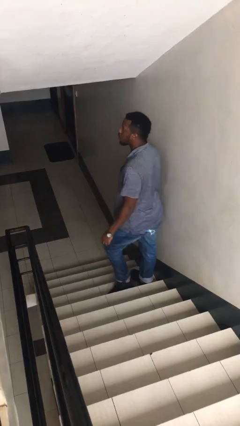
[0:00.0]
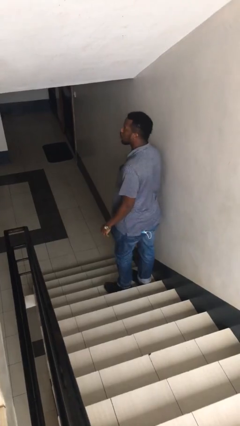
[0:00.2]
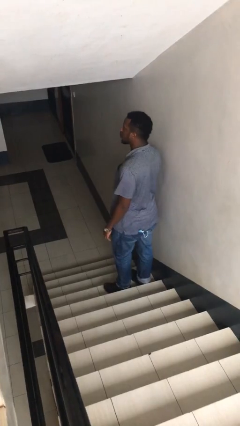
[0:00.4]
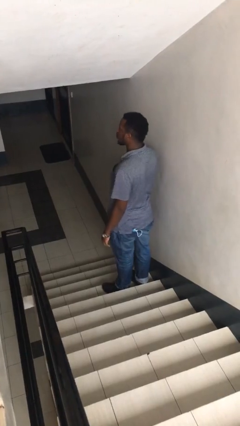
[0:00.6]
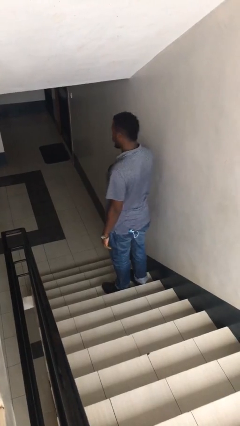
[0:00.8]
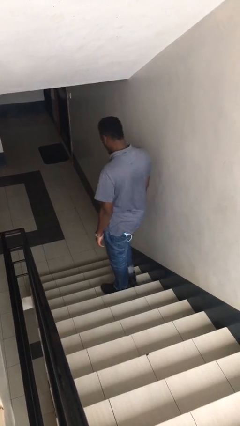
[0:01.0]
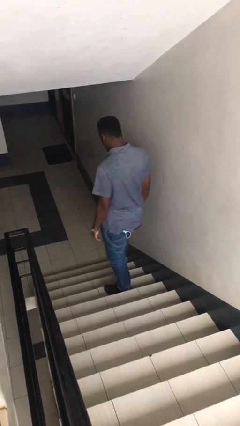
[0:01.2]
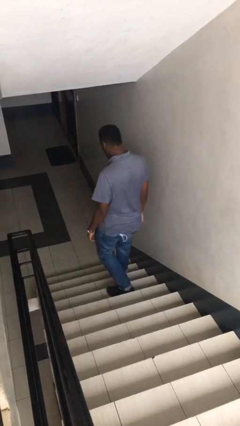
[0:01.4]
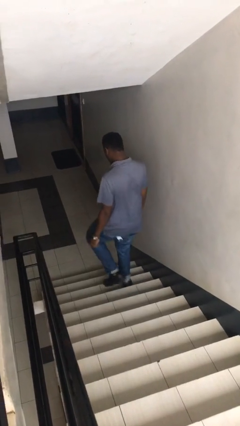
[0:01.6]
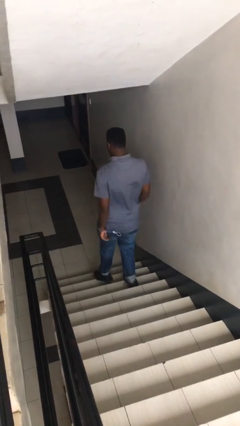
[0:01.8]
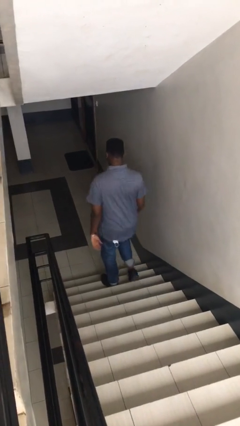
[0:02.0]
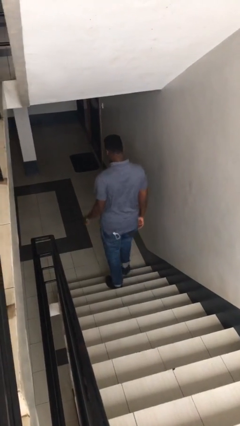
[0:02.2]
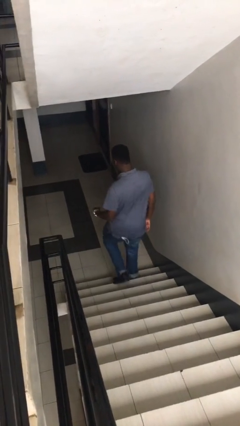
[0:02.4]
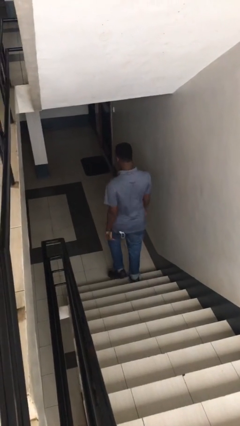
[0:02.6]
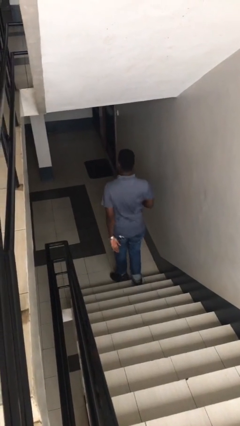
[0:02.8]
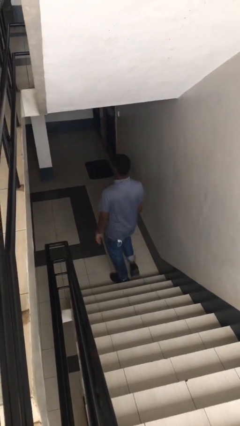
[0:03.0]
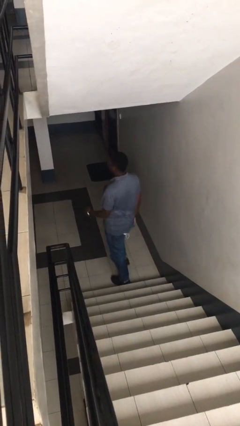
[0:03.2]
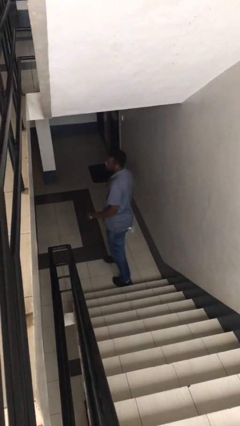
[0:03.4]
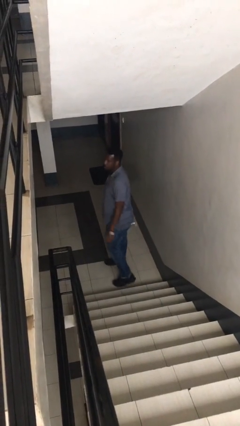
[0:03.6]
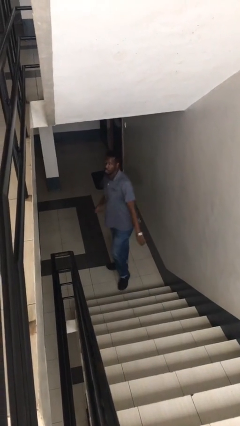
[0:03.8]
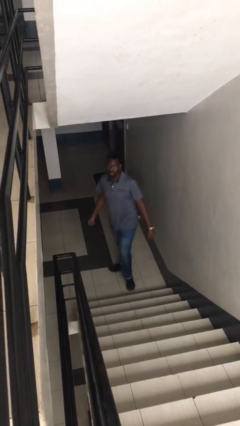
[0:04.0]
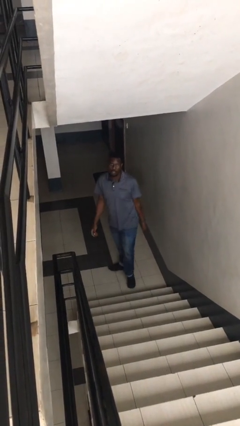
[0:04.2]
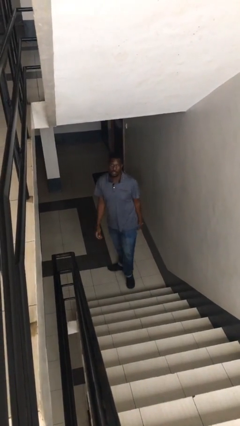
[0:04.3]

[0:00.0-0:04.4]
person climbs down stairs

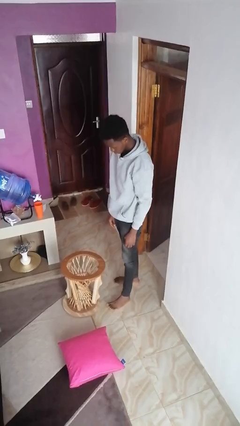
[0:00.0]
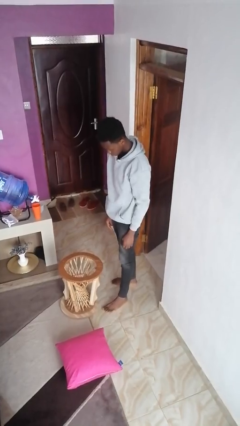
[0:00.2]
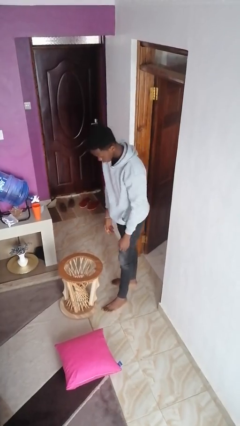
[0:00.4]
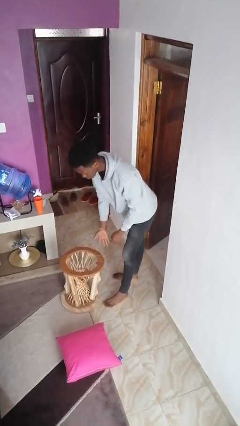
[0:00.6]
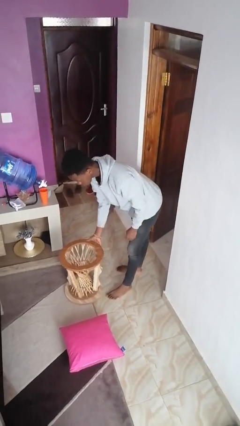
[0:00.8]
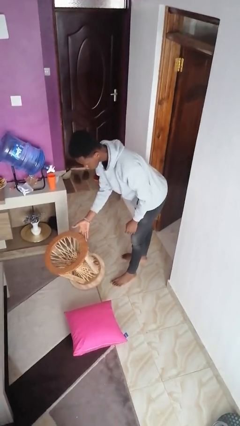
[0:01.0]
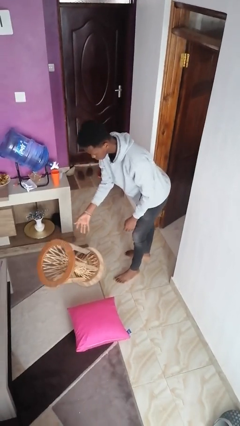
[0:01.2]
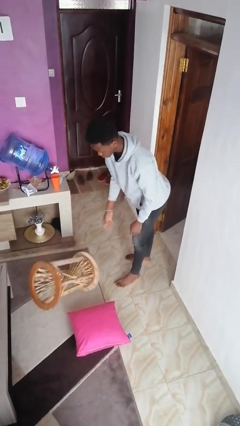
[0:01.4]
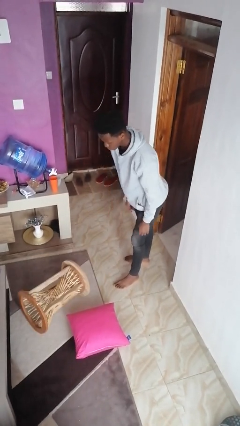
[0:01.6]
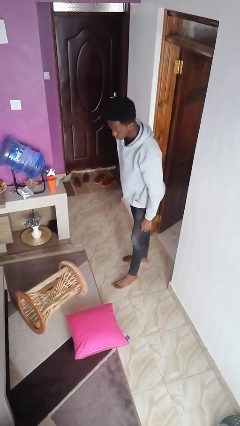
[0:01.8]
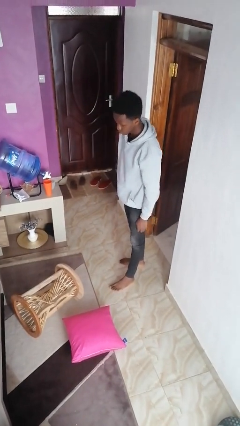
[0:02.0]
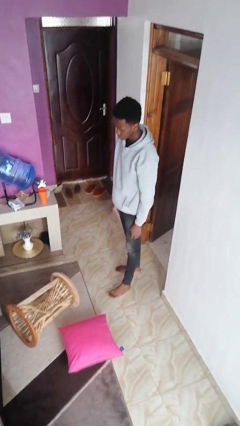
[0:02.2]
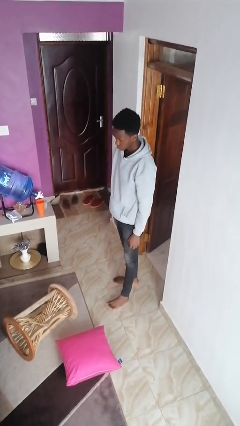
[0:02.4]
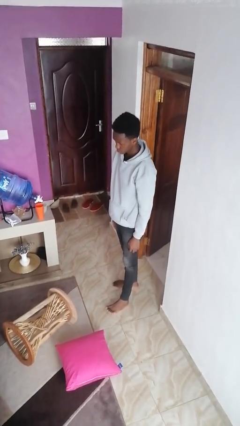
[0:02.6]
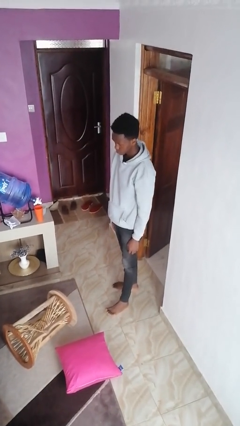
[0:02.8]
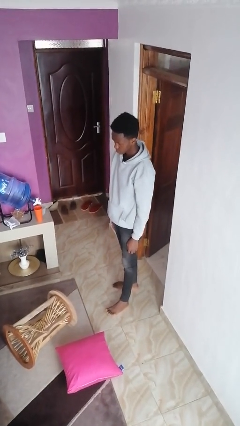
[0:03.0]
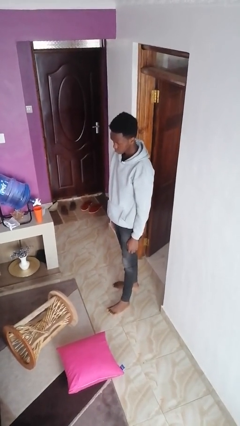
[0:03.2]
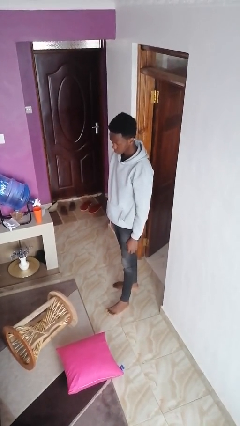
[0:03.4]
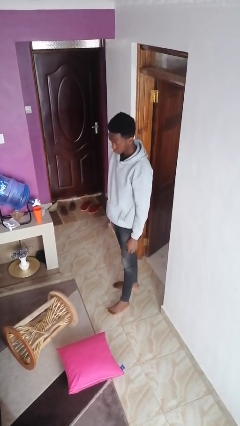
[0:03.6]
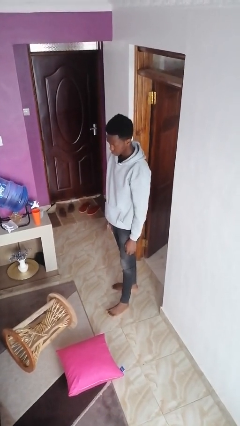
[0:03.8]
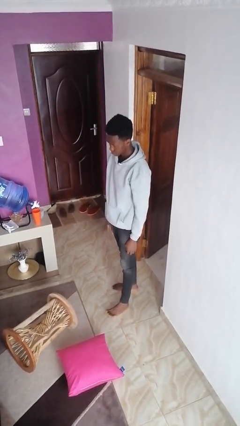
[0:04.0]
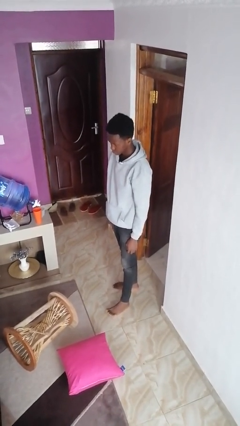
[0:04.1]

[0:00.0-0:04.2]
person knocks over furniture

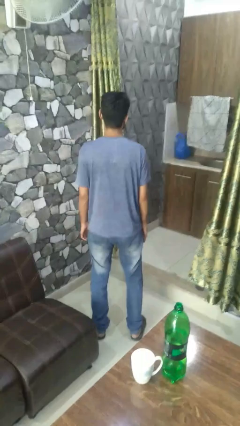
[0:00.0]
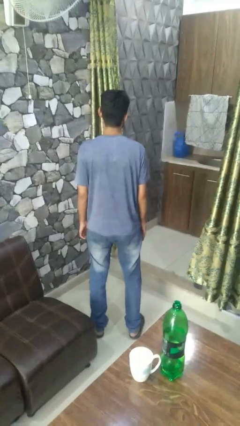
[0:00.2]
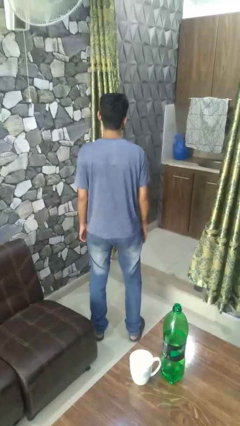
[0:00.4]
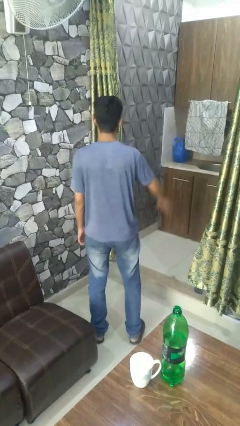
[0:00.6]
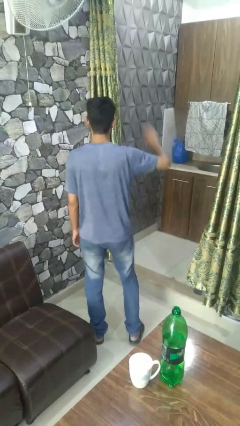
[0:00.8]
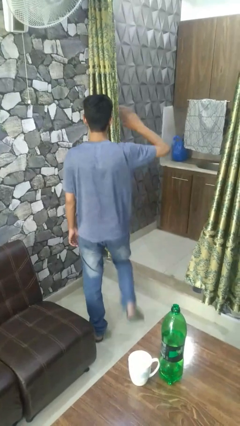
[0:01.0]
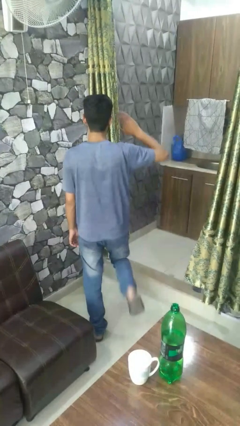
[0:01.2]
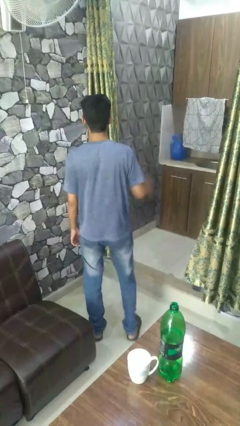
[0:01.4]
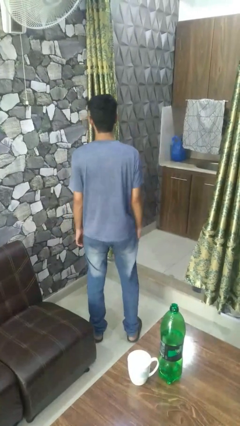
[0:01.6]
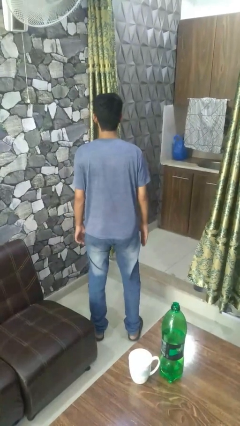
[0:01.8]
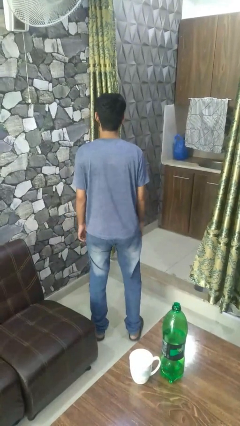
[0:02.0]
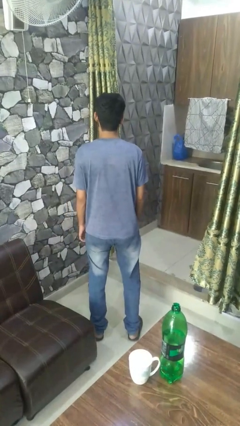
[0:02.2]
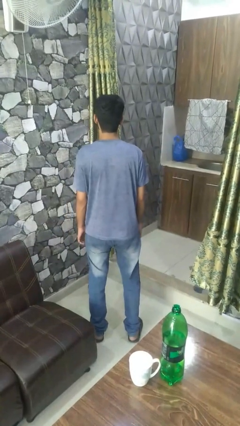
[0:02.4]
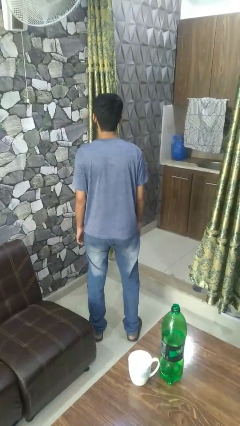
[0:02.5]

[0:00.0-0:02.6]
person salutes

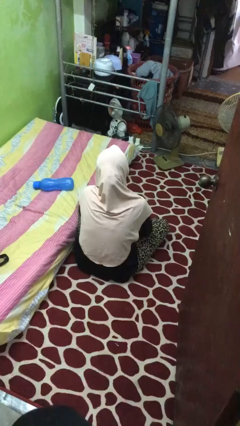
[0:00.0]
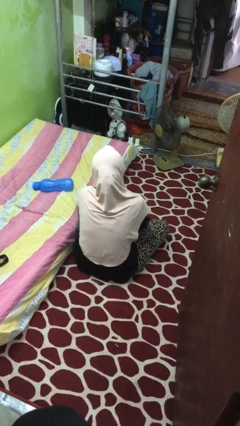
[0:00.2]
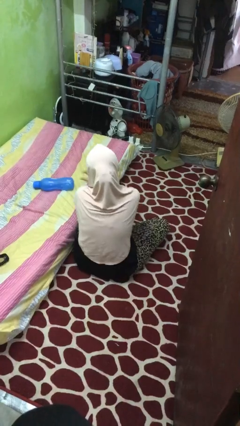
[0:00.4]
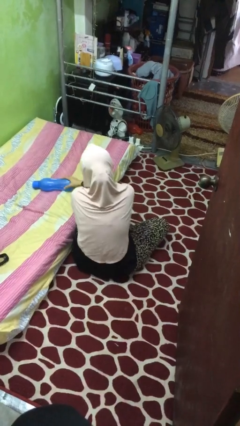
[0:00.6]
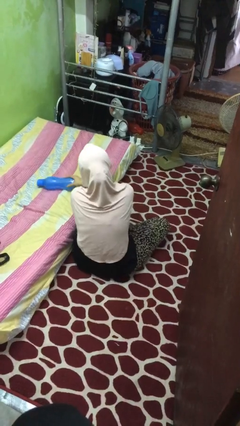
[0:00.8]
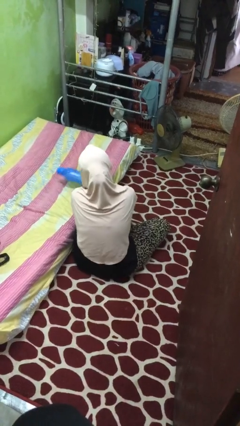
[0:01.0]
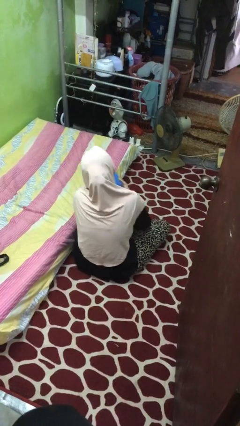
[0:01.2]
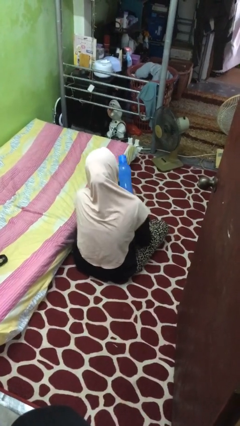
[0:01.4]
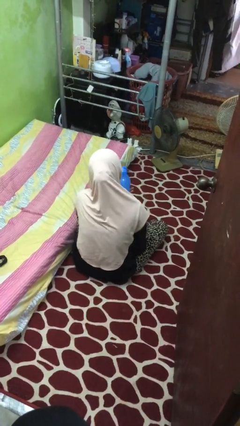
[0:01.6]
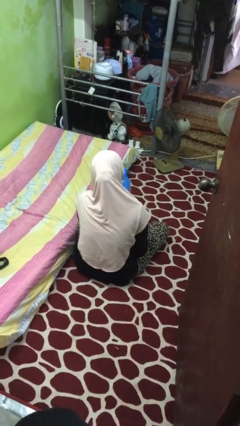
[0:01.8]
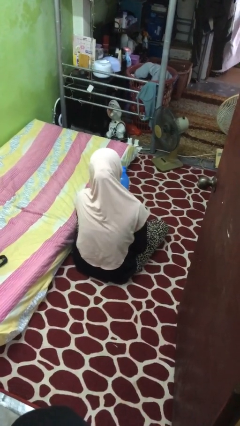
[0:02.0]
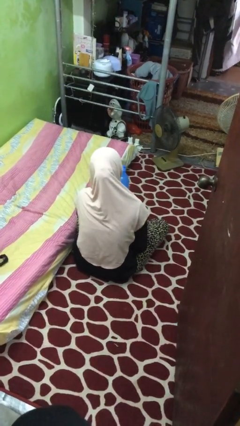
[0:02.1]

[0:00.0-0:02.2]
person picks up object from bed

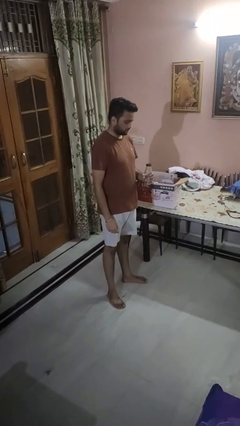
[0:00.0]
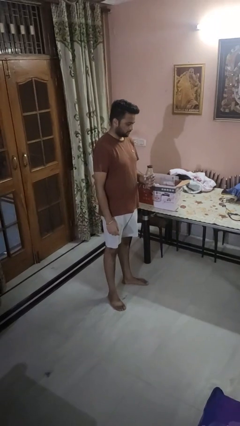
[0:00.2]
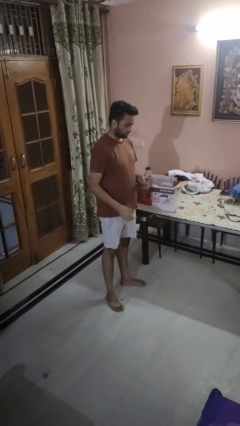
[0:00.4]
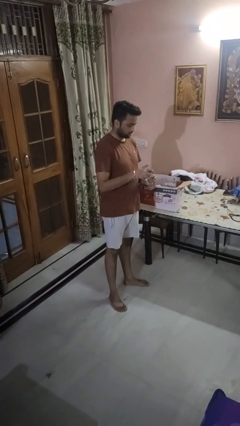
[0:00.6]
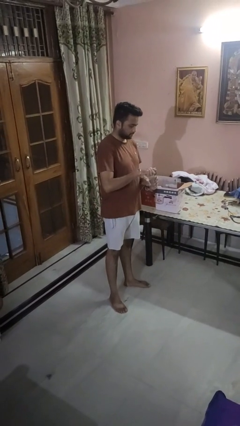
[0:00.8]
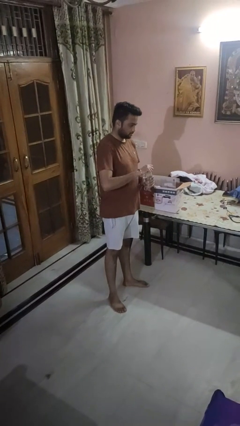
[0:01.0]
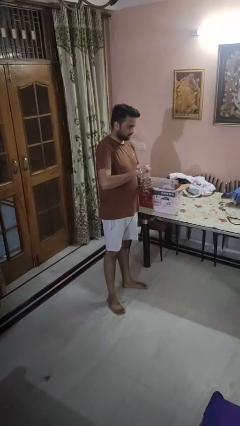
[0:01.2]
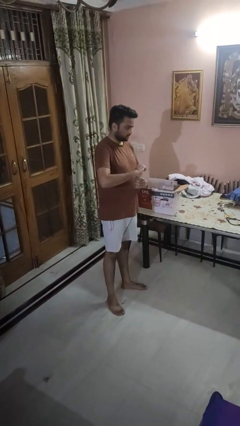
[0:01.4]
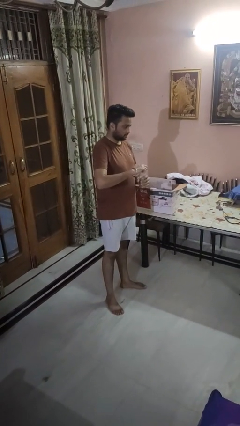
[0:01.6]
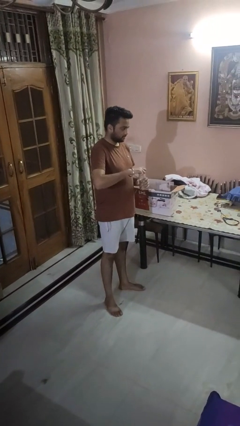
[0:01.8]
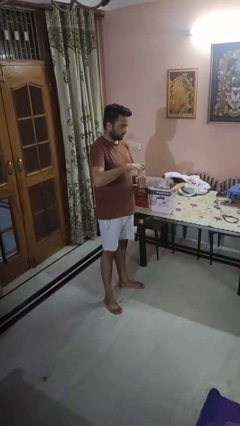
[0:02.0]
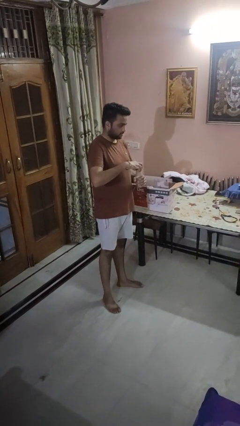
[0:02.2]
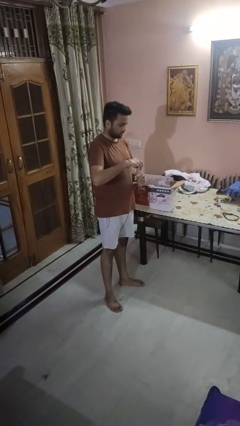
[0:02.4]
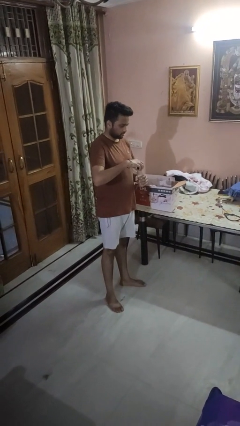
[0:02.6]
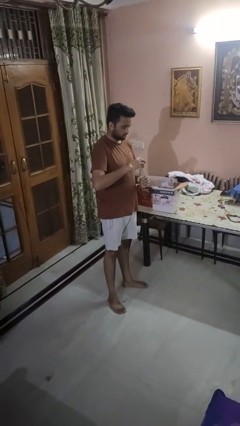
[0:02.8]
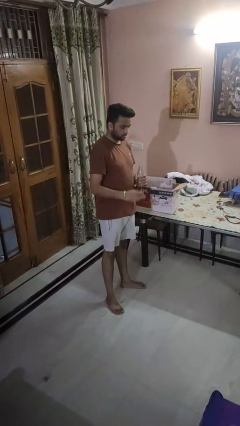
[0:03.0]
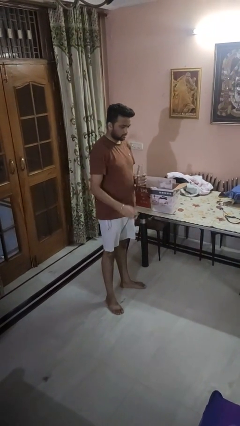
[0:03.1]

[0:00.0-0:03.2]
person unscrews lid from bottle

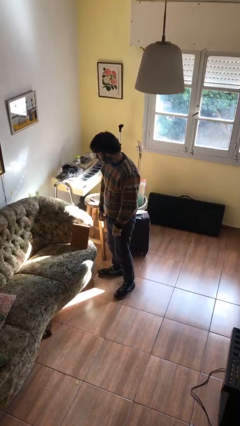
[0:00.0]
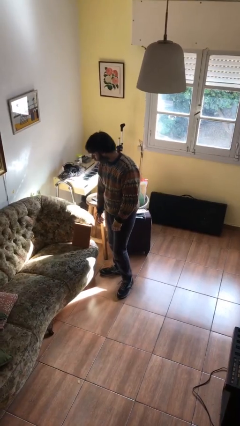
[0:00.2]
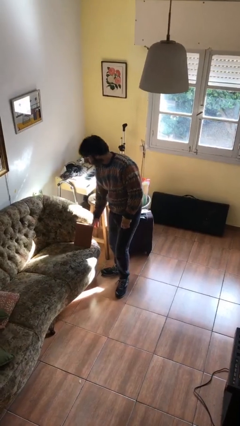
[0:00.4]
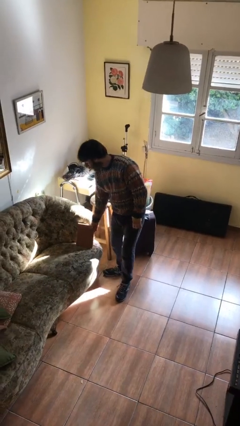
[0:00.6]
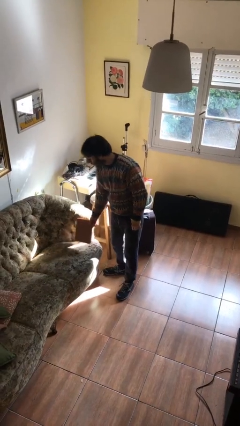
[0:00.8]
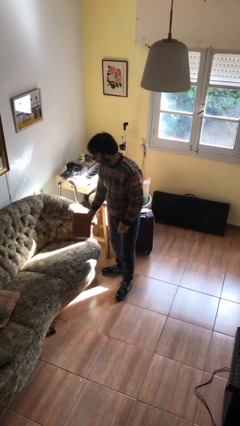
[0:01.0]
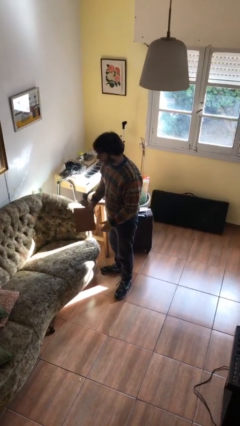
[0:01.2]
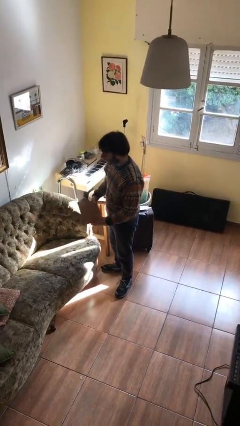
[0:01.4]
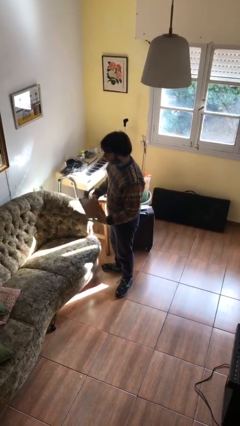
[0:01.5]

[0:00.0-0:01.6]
person picks up object from couch
